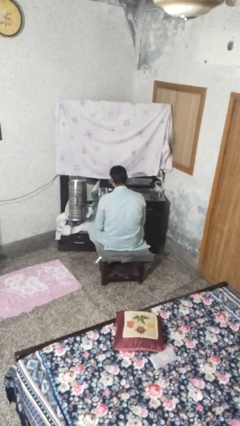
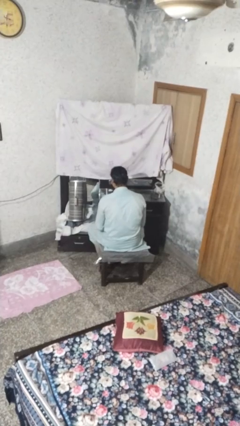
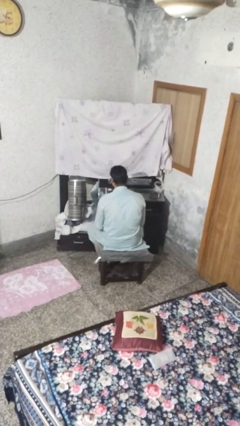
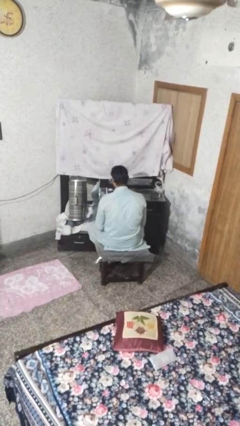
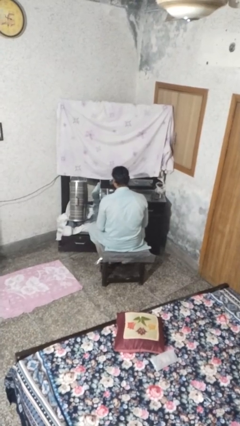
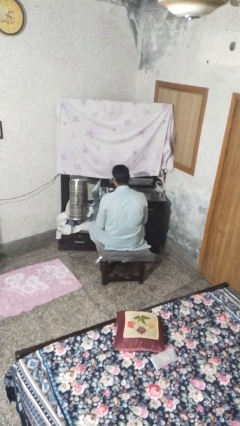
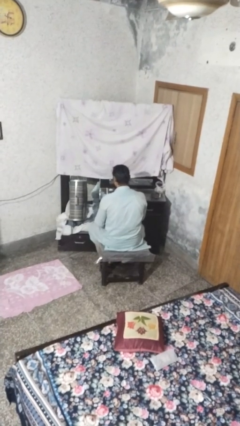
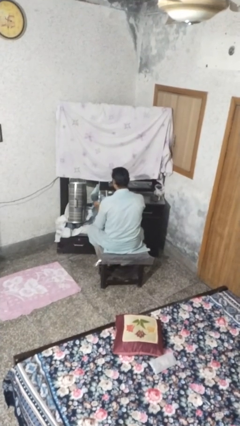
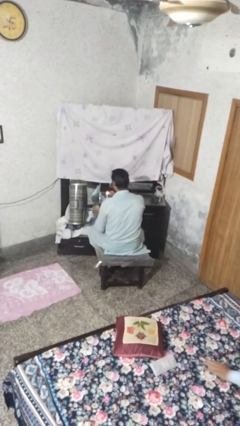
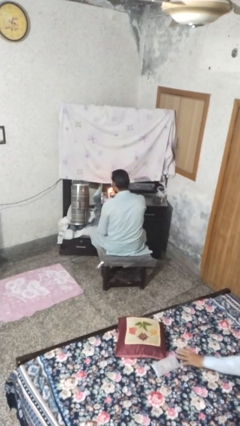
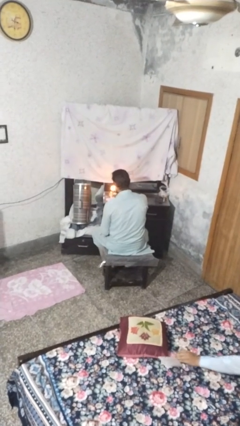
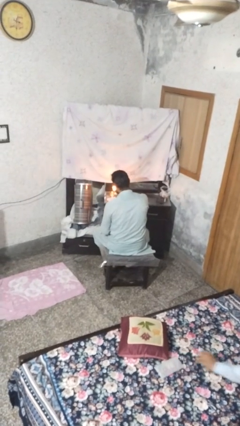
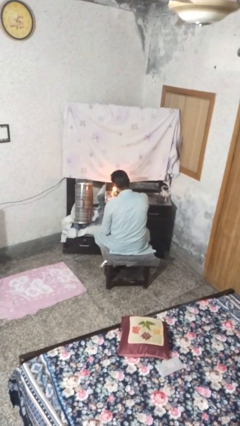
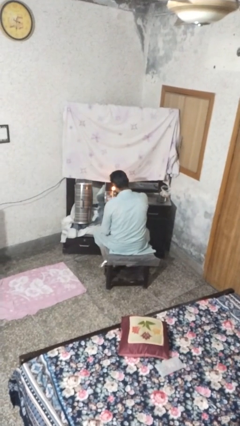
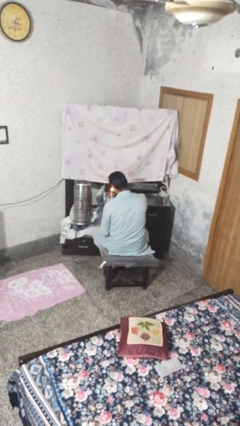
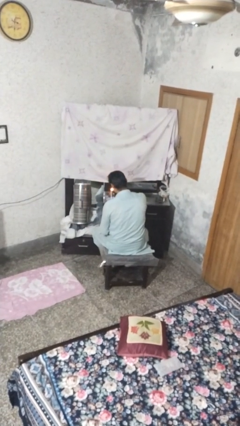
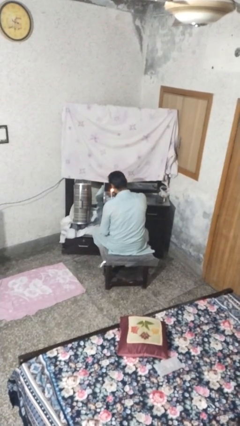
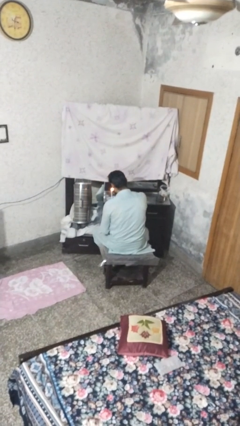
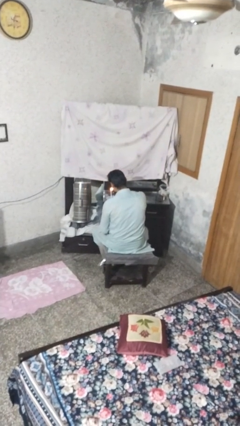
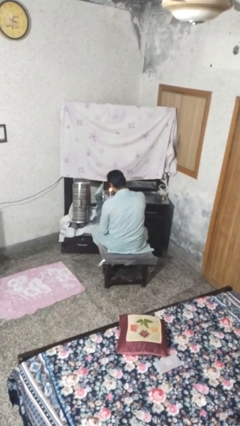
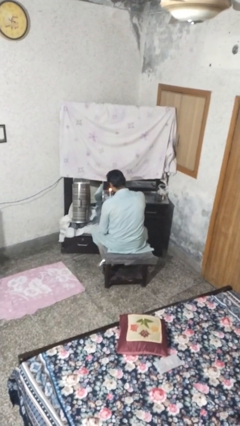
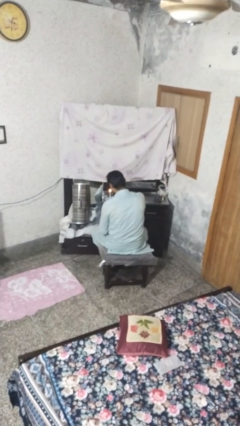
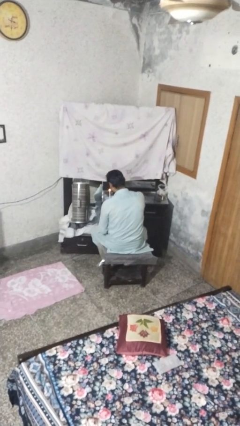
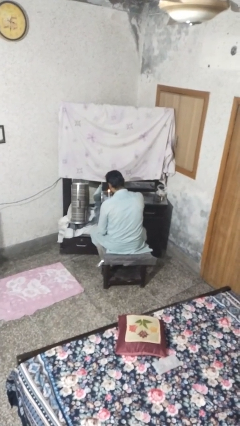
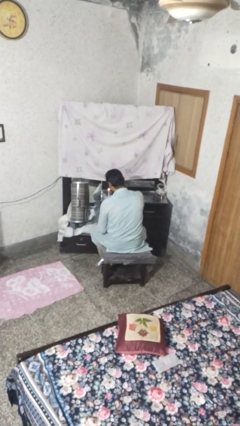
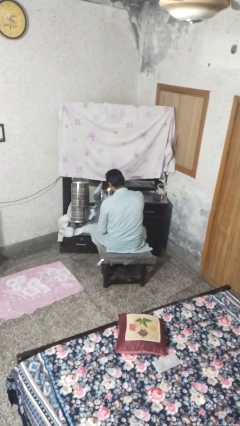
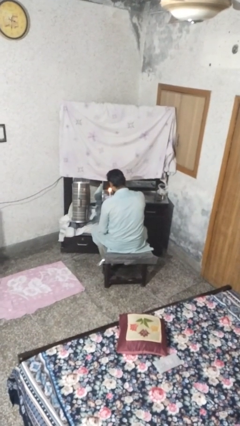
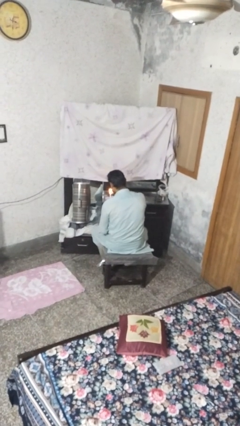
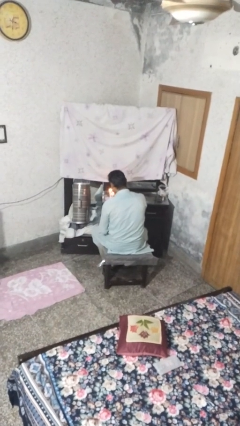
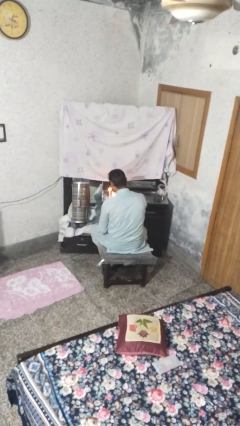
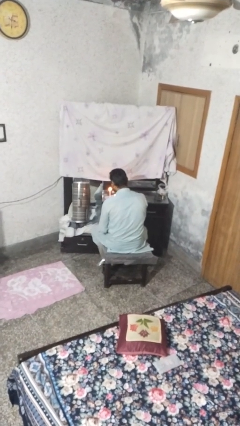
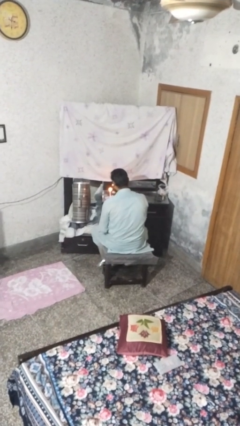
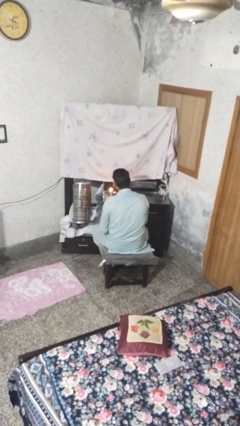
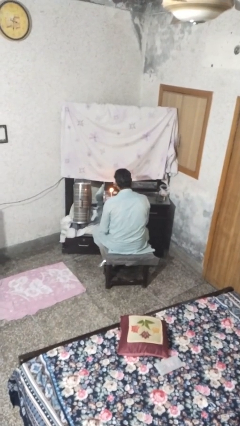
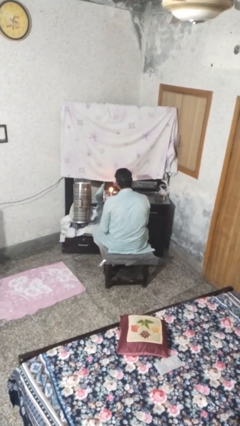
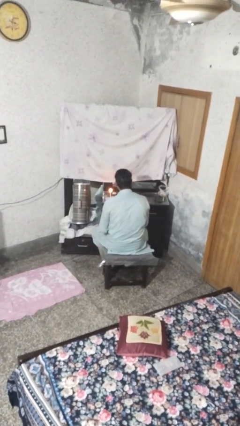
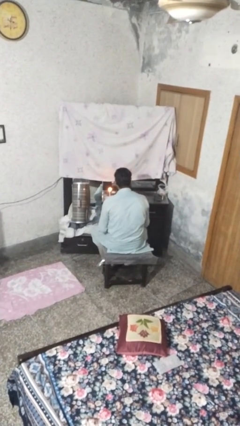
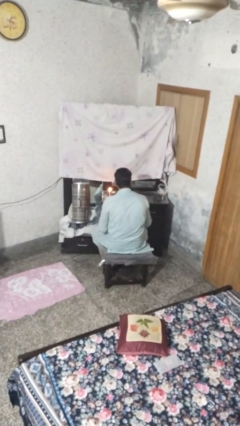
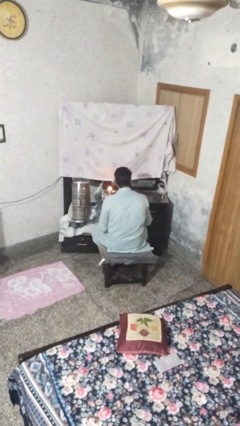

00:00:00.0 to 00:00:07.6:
person lights candle

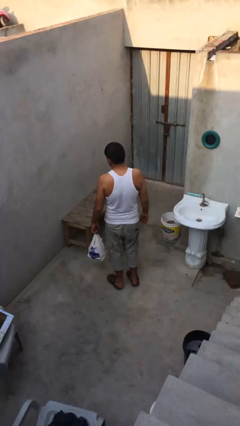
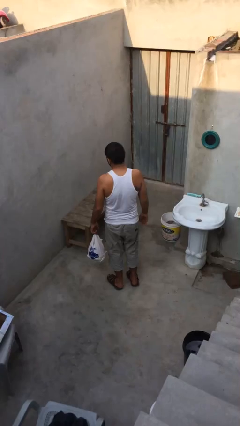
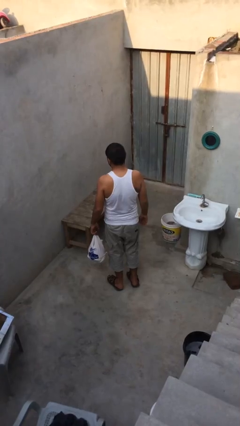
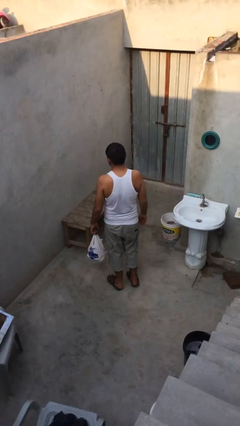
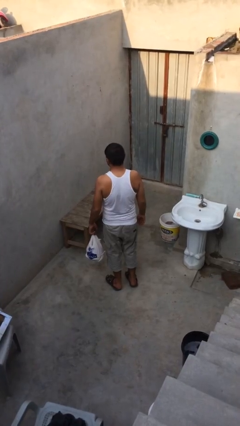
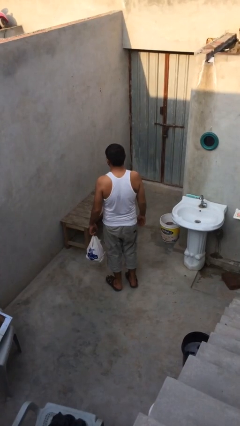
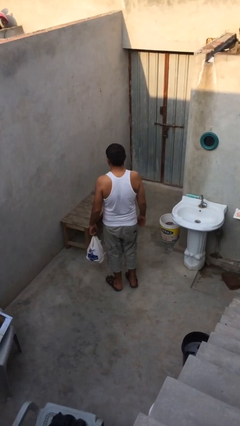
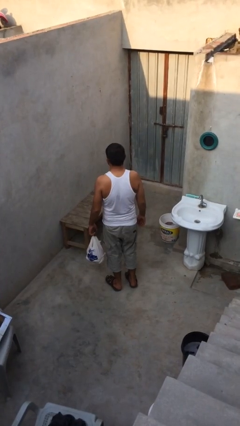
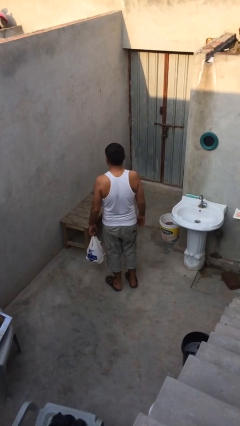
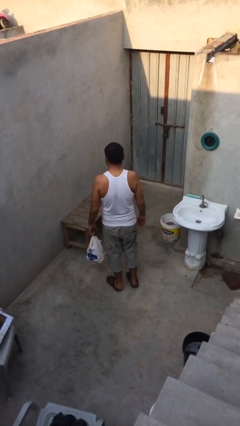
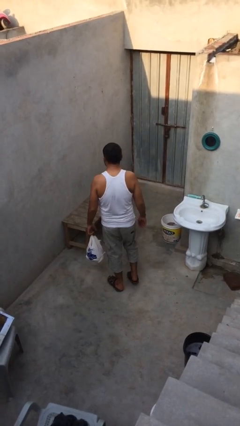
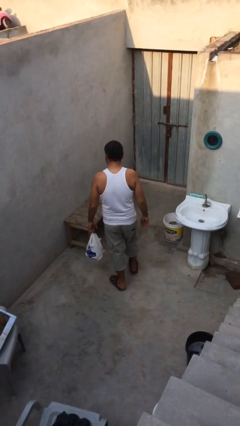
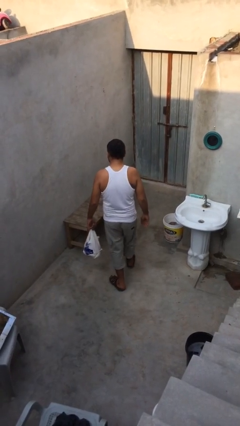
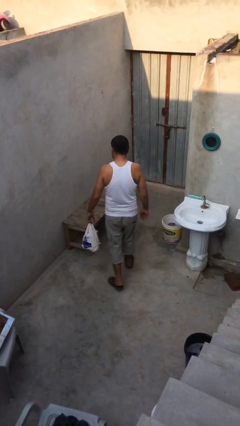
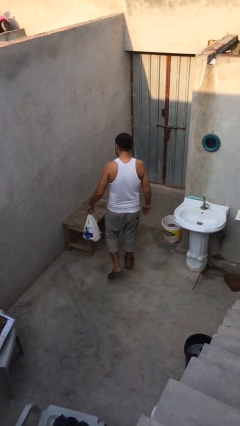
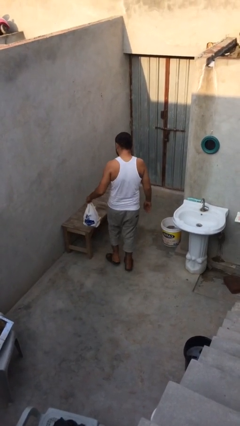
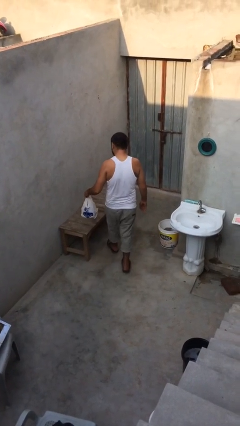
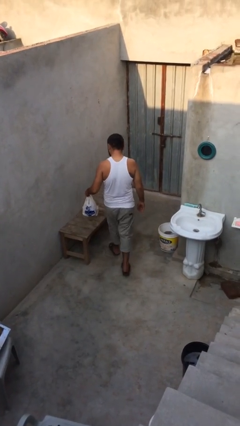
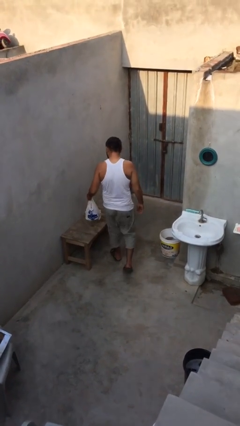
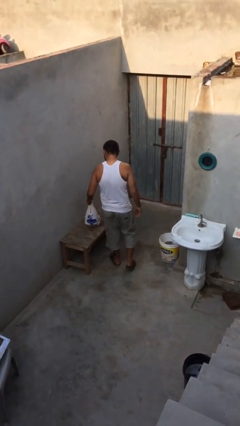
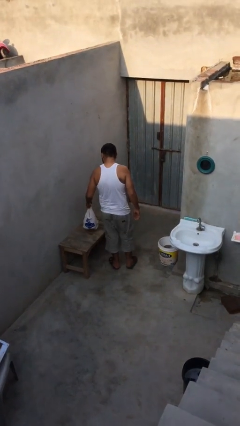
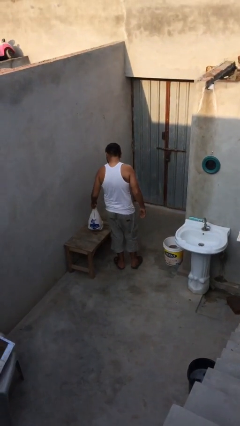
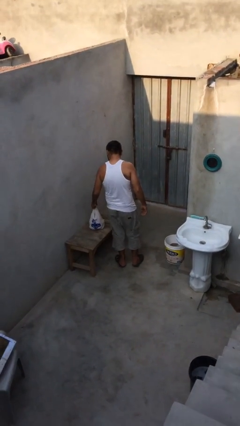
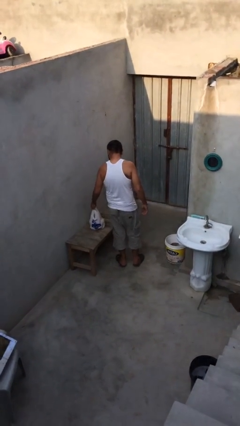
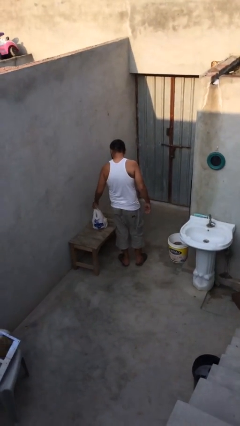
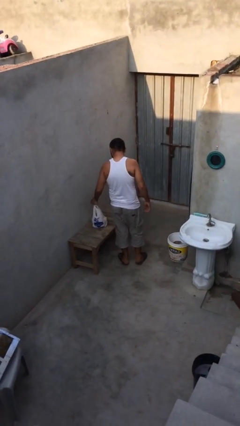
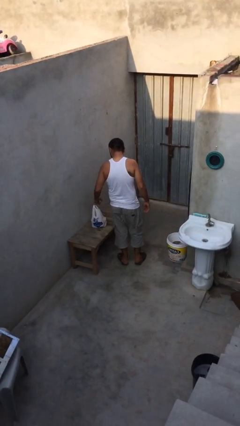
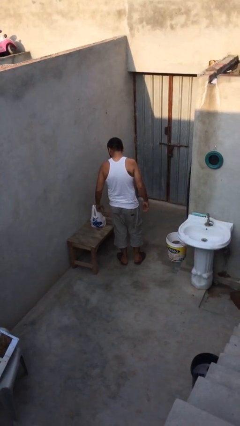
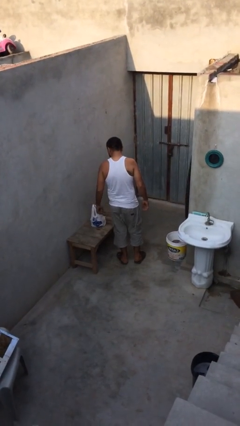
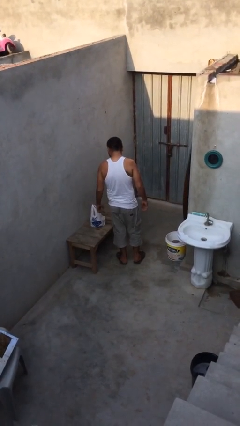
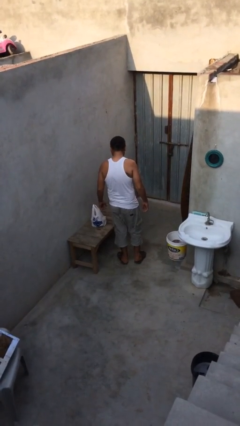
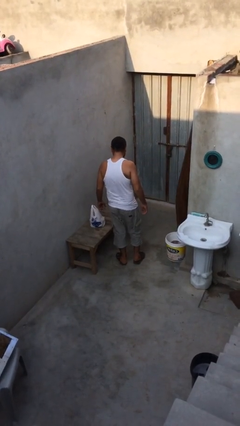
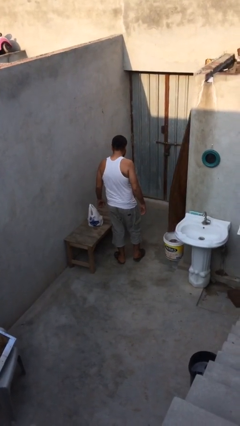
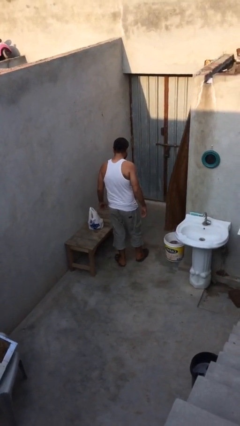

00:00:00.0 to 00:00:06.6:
person puts down object on table

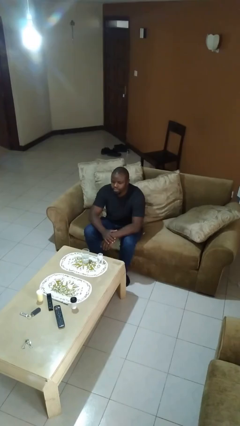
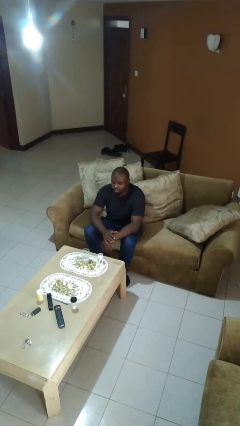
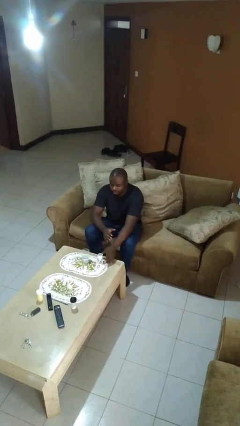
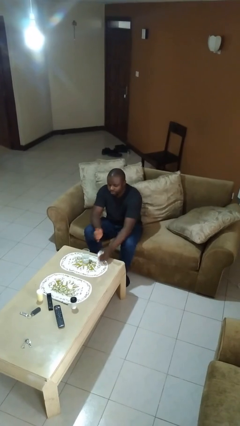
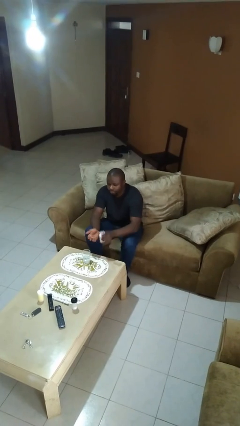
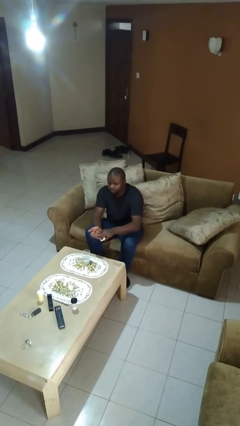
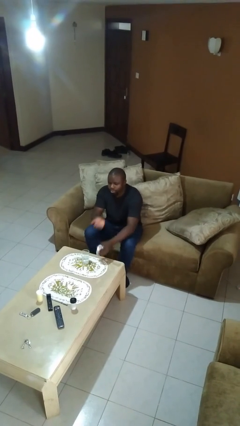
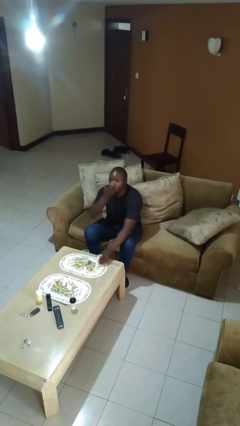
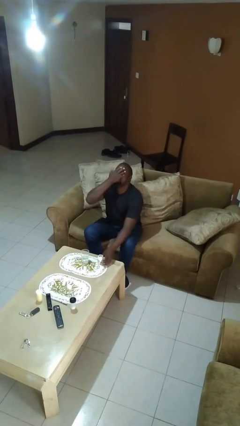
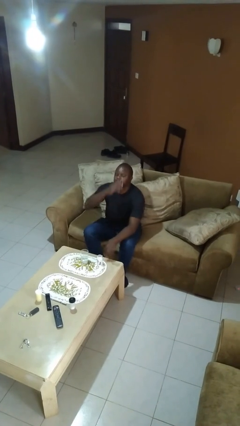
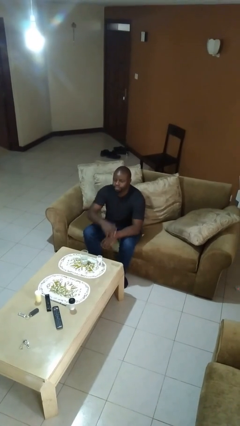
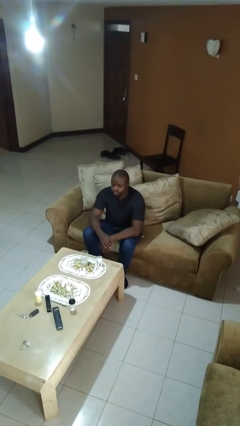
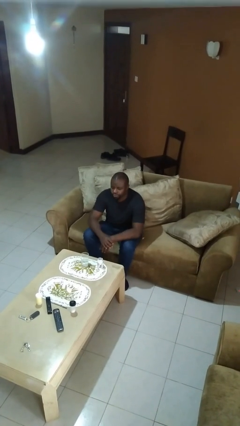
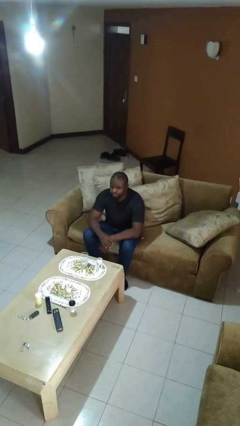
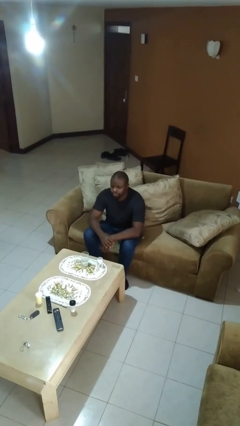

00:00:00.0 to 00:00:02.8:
person takes medicine pills

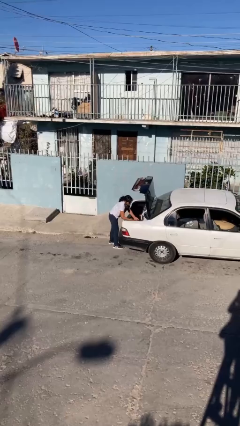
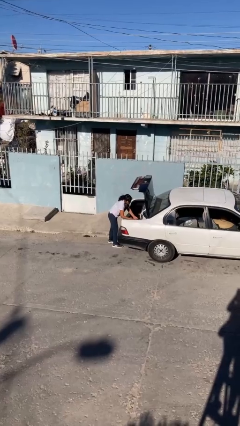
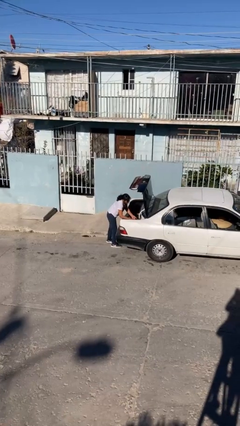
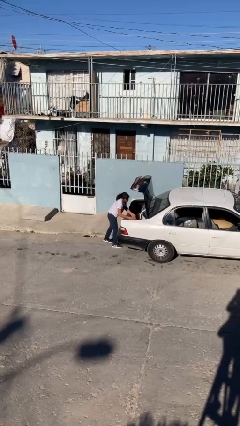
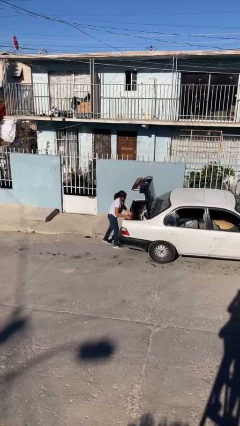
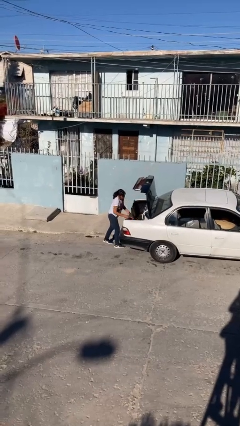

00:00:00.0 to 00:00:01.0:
person loads car
